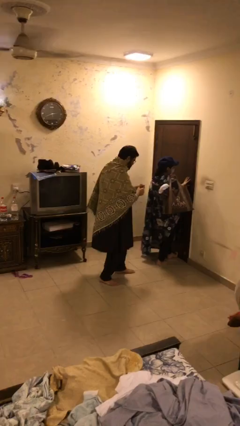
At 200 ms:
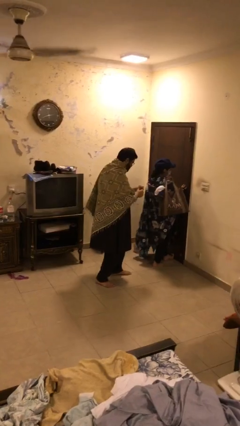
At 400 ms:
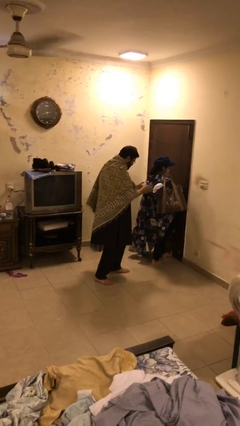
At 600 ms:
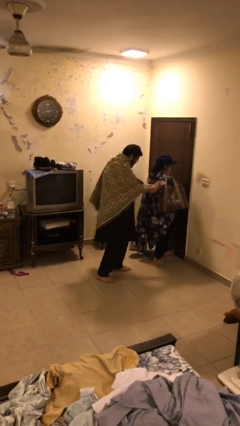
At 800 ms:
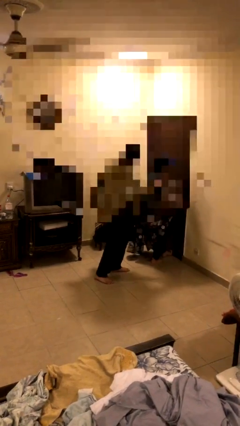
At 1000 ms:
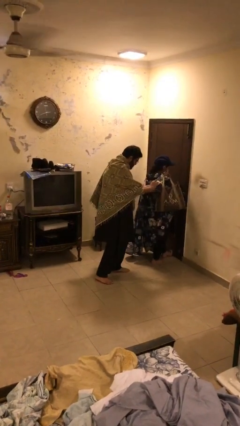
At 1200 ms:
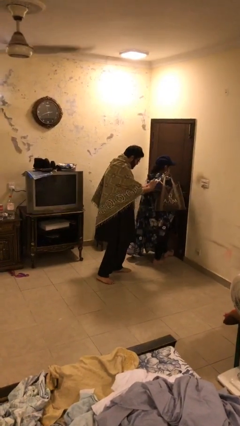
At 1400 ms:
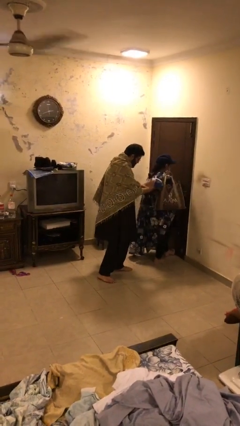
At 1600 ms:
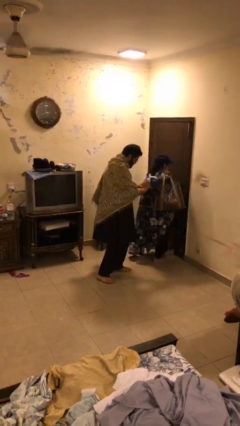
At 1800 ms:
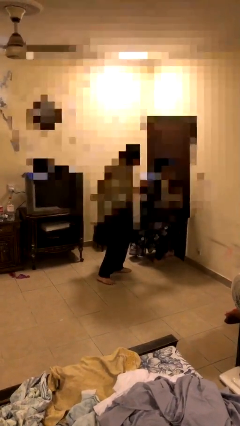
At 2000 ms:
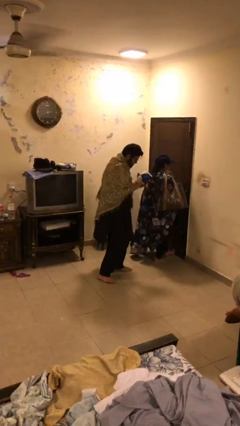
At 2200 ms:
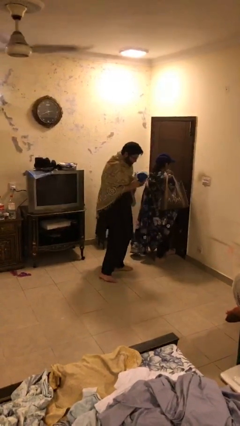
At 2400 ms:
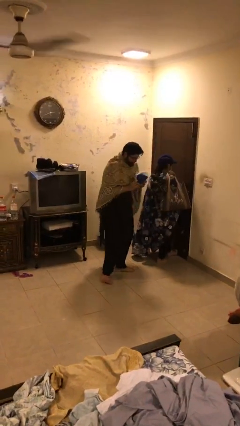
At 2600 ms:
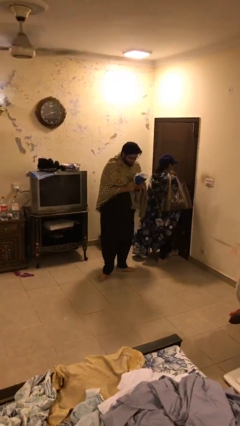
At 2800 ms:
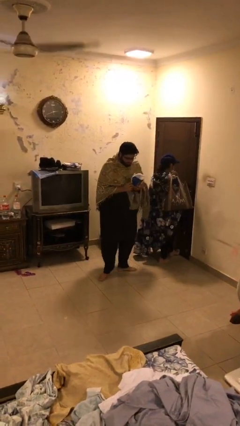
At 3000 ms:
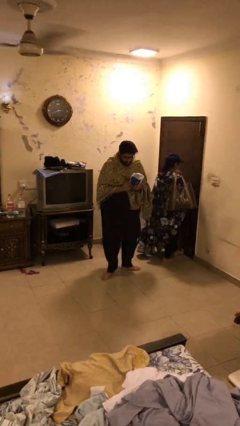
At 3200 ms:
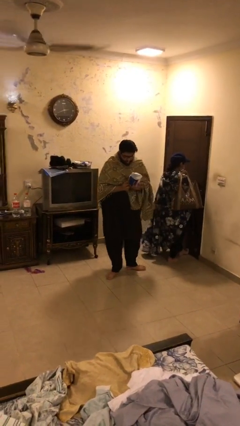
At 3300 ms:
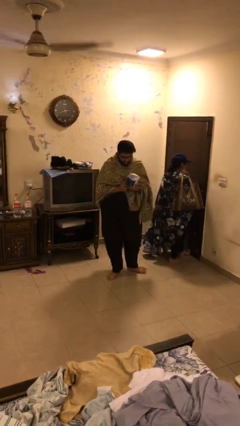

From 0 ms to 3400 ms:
person steals object from person

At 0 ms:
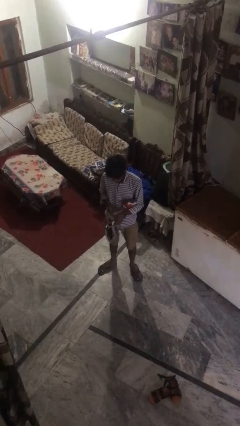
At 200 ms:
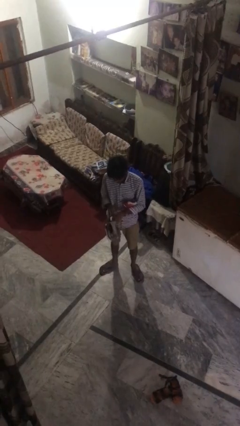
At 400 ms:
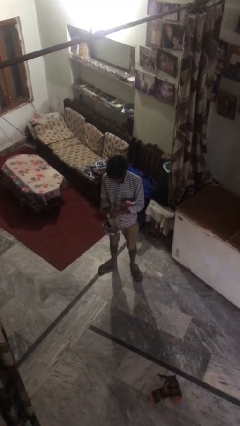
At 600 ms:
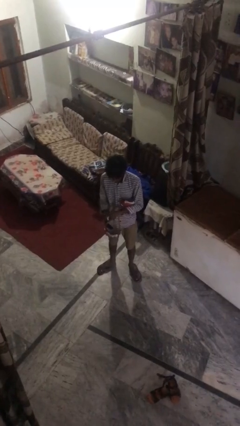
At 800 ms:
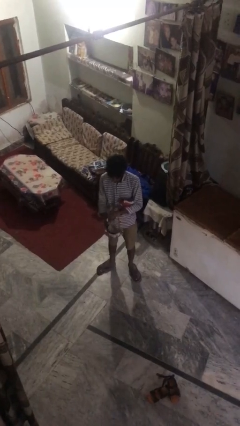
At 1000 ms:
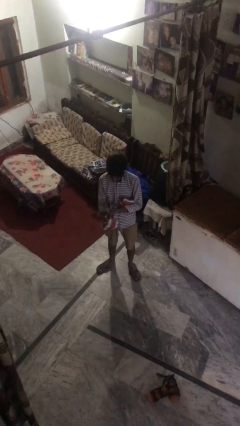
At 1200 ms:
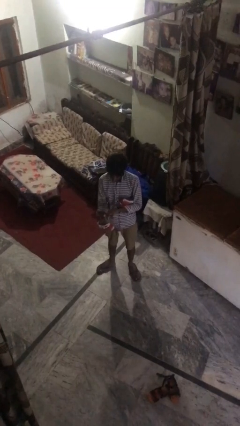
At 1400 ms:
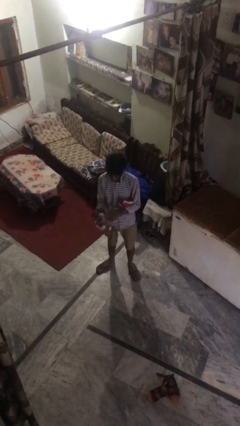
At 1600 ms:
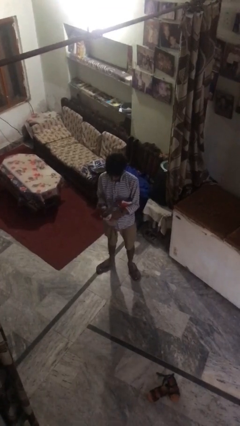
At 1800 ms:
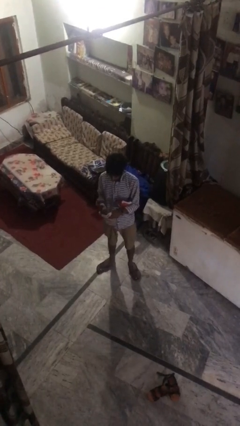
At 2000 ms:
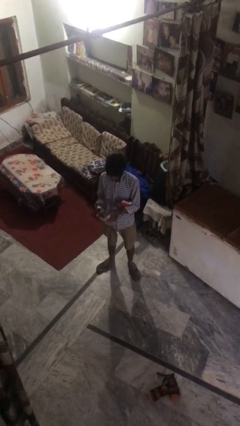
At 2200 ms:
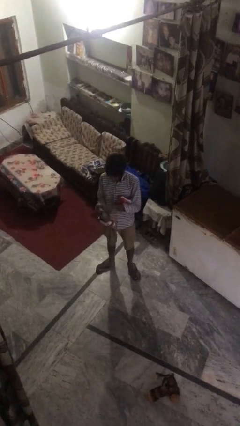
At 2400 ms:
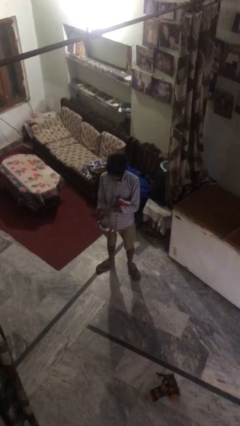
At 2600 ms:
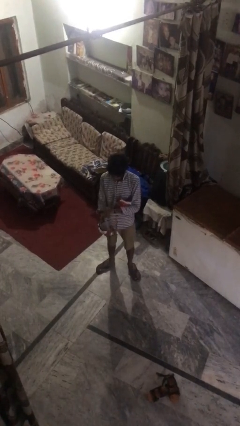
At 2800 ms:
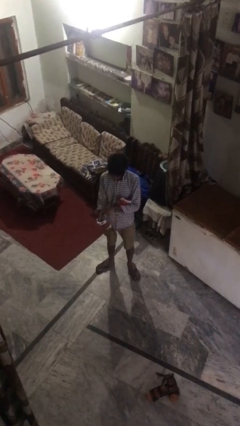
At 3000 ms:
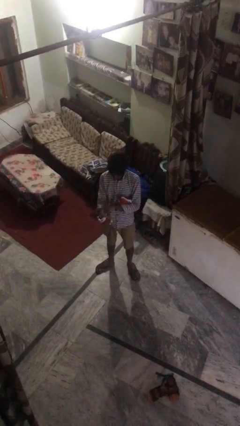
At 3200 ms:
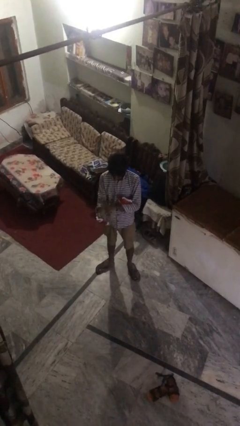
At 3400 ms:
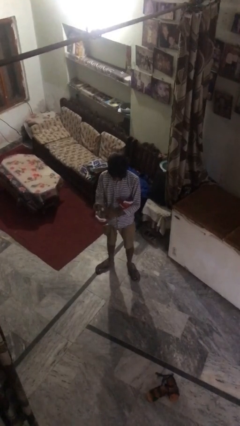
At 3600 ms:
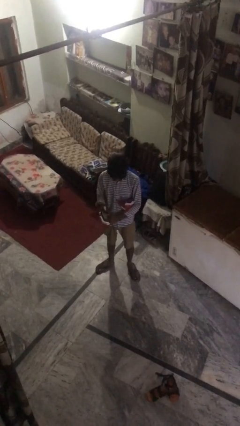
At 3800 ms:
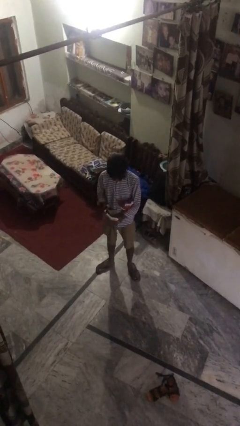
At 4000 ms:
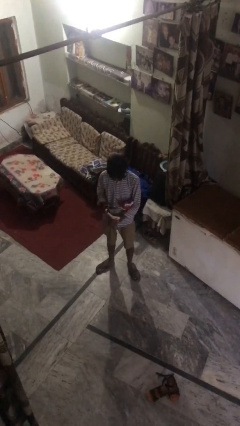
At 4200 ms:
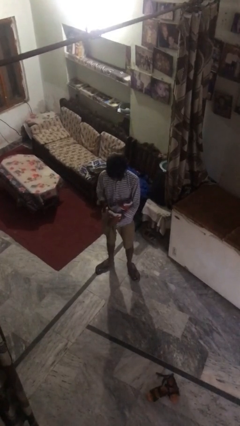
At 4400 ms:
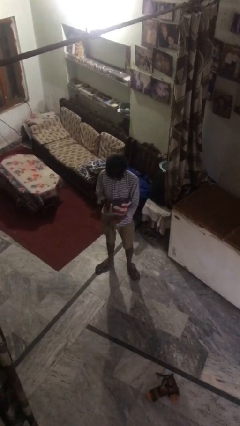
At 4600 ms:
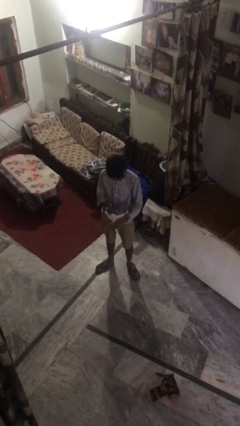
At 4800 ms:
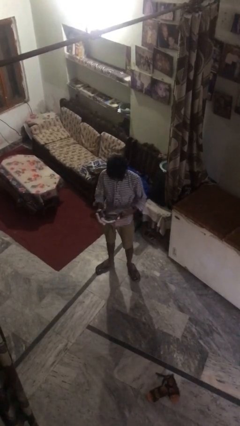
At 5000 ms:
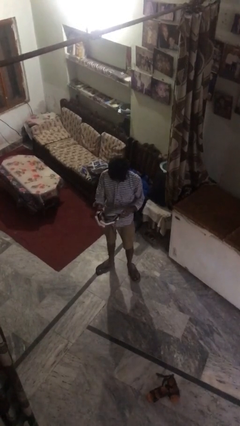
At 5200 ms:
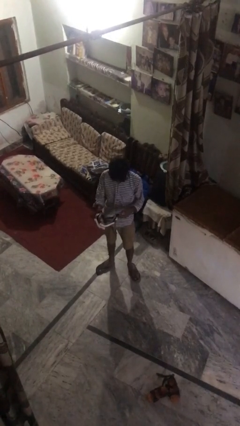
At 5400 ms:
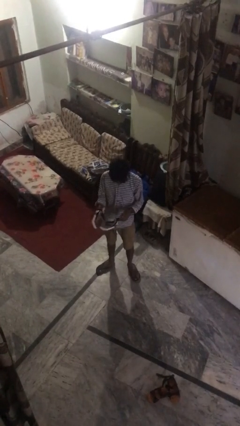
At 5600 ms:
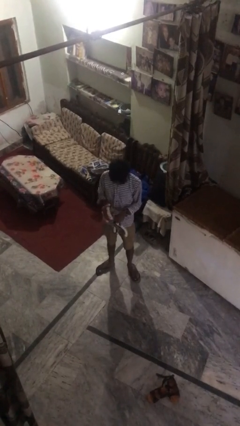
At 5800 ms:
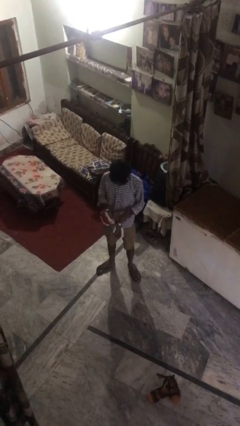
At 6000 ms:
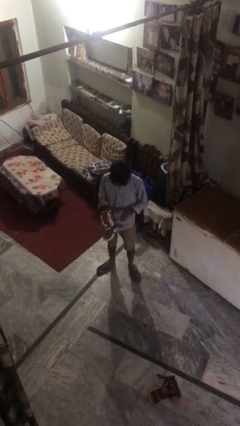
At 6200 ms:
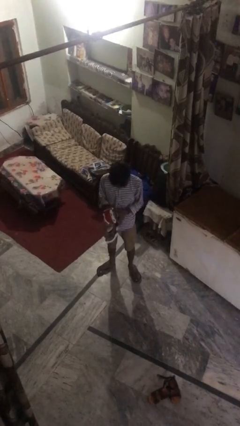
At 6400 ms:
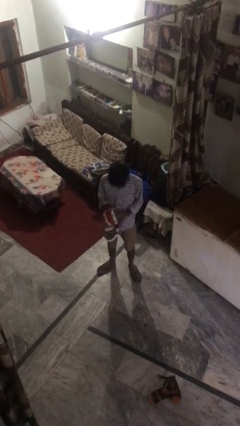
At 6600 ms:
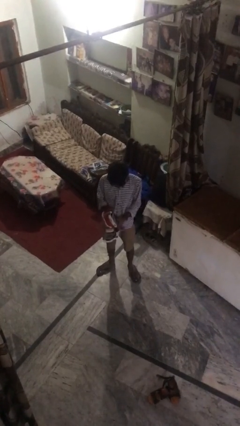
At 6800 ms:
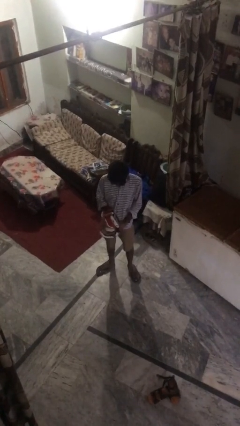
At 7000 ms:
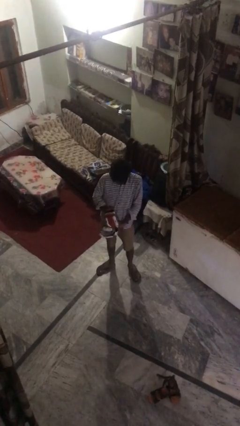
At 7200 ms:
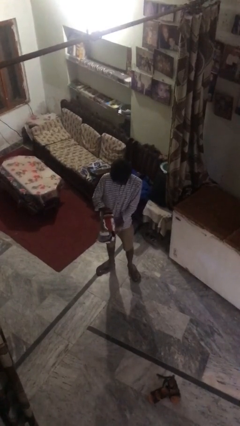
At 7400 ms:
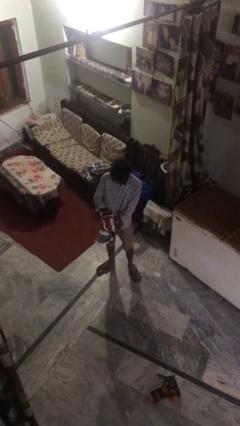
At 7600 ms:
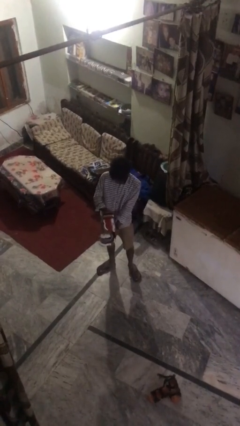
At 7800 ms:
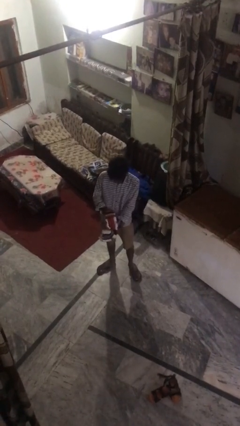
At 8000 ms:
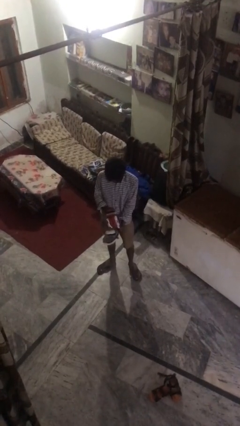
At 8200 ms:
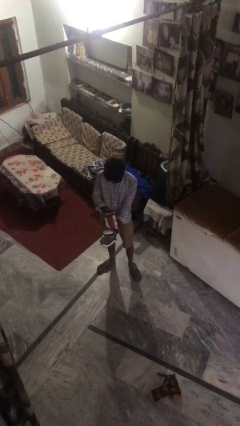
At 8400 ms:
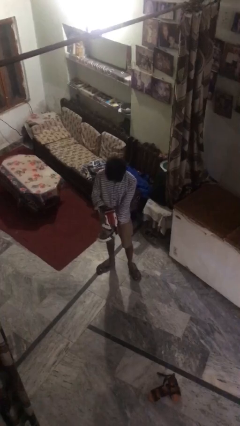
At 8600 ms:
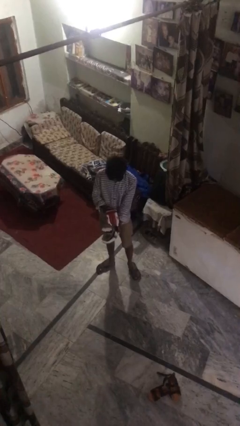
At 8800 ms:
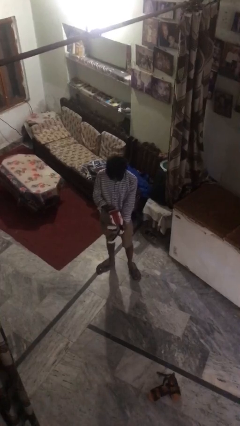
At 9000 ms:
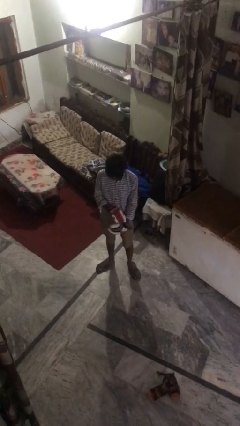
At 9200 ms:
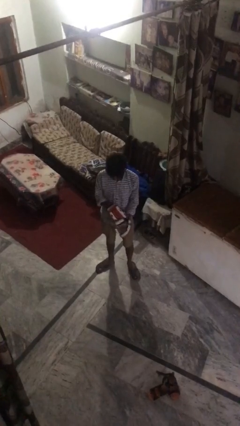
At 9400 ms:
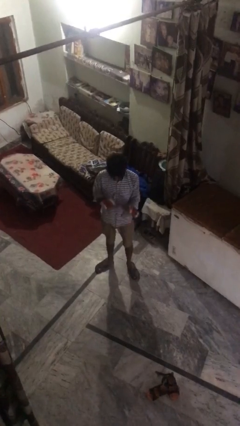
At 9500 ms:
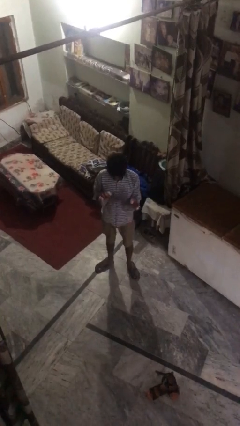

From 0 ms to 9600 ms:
person puts on gloves

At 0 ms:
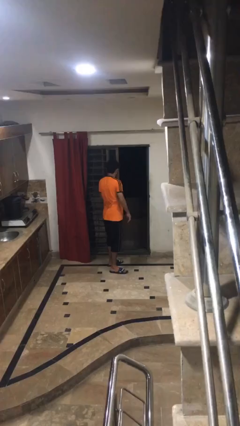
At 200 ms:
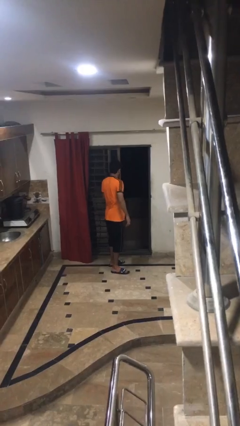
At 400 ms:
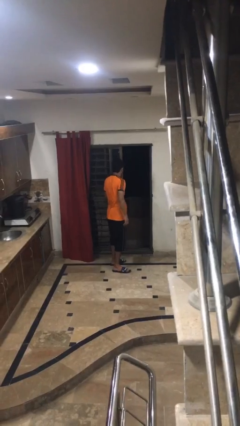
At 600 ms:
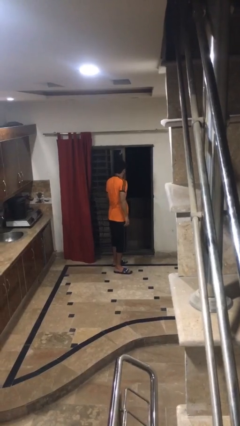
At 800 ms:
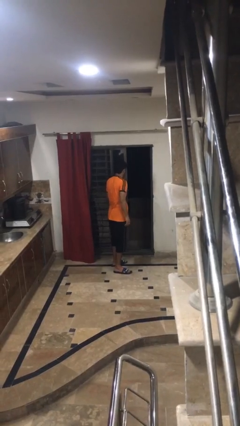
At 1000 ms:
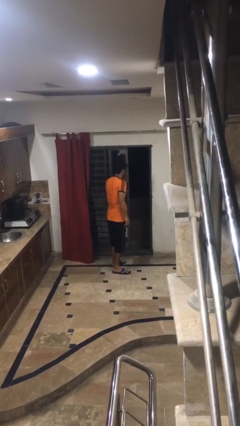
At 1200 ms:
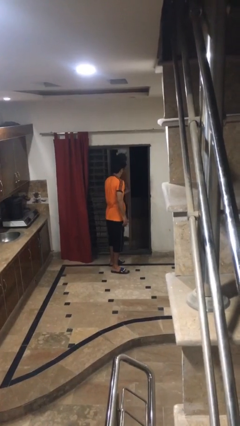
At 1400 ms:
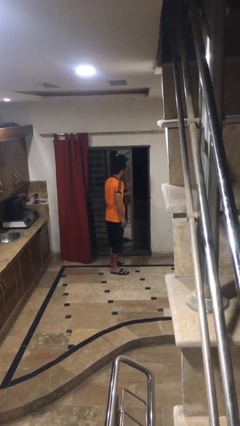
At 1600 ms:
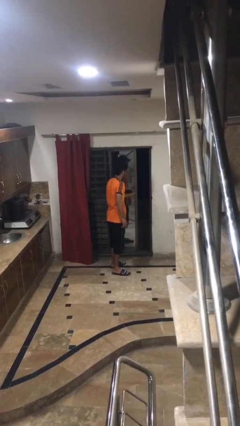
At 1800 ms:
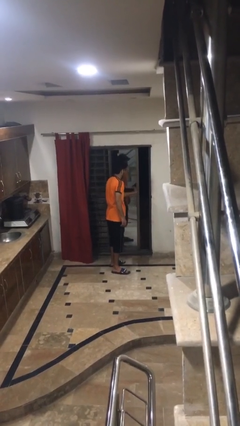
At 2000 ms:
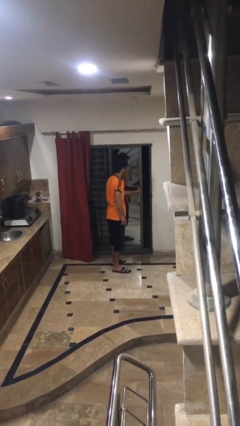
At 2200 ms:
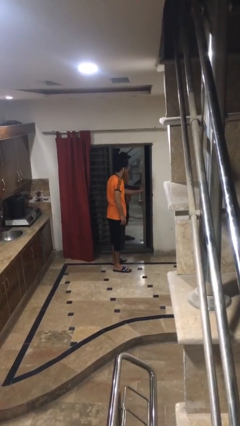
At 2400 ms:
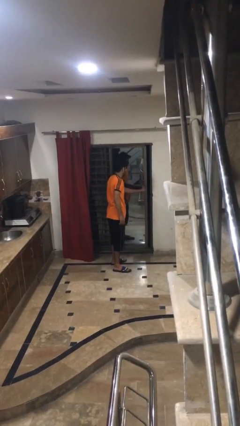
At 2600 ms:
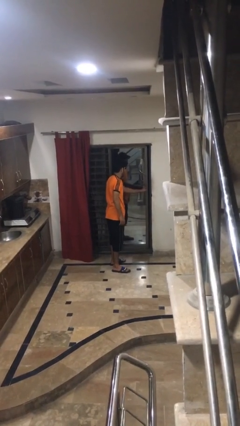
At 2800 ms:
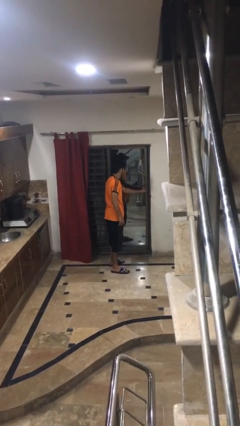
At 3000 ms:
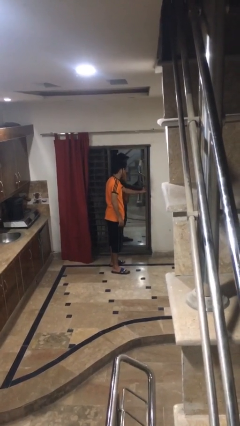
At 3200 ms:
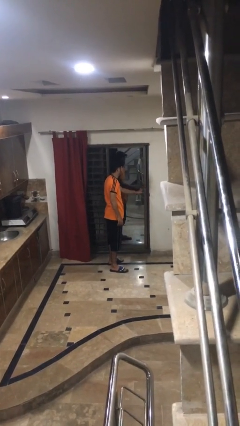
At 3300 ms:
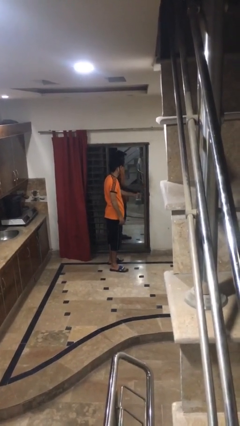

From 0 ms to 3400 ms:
person closes sliding door

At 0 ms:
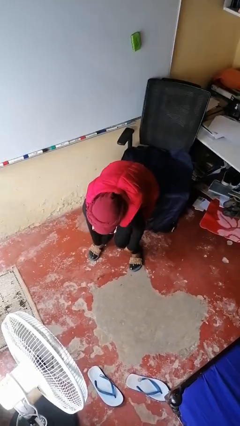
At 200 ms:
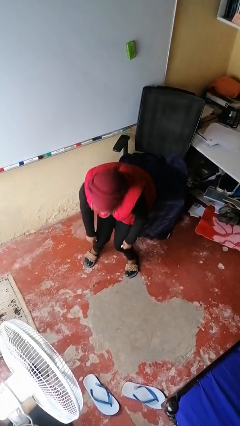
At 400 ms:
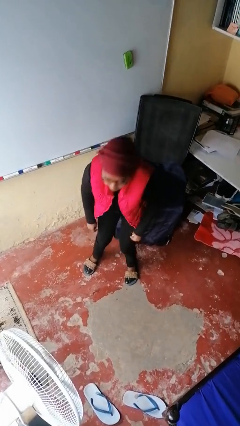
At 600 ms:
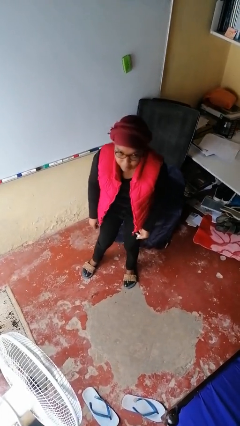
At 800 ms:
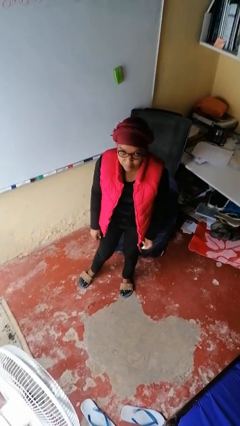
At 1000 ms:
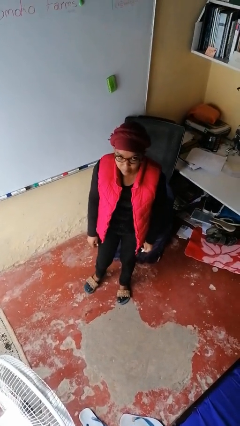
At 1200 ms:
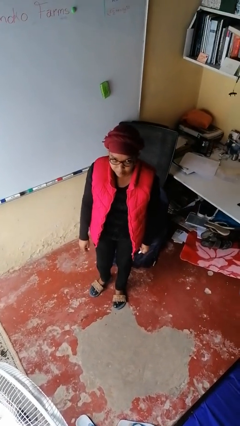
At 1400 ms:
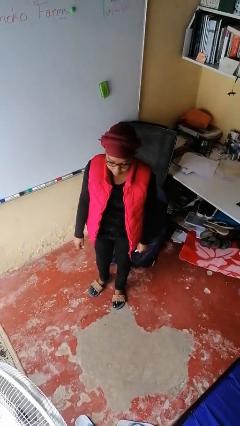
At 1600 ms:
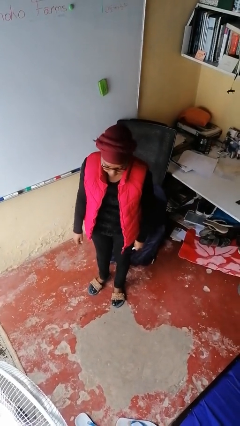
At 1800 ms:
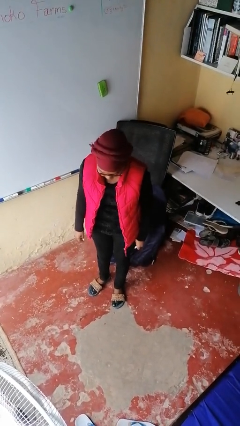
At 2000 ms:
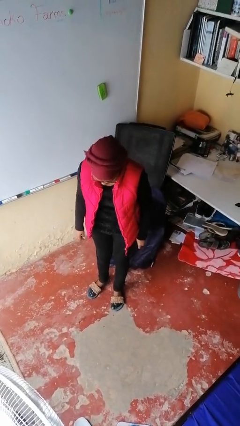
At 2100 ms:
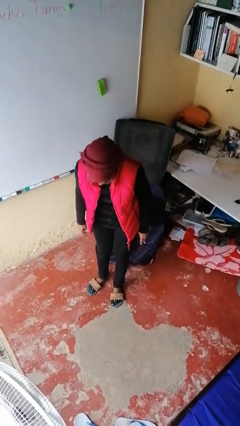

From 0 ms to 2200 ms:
person stands up from floor
